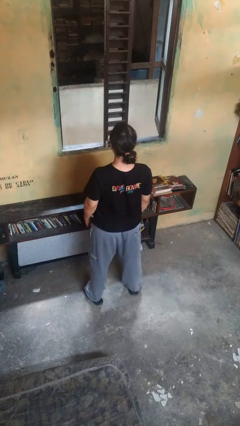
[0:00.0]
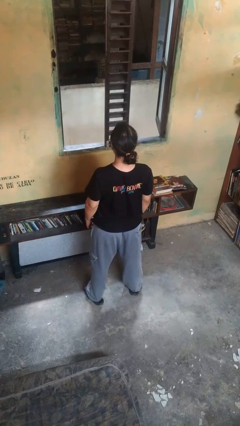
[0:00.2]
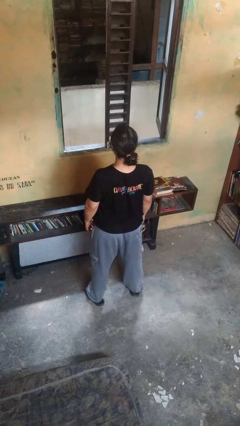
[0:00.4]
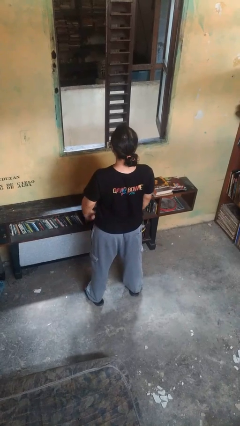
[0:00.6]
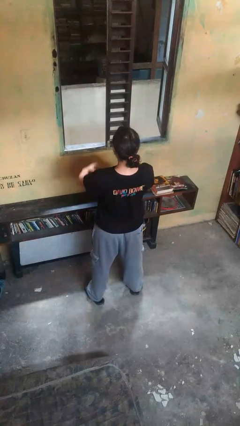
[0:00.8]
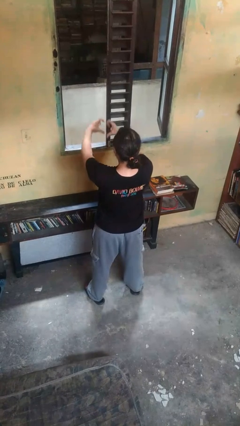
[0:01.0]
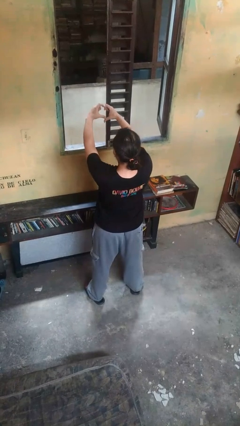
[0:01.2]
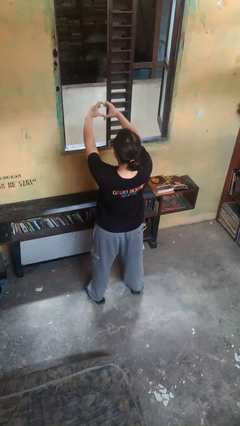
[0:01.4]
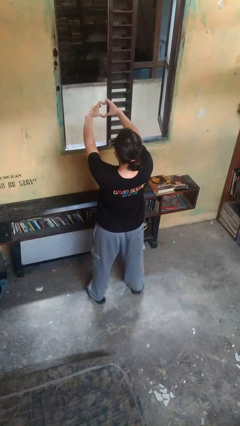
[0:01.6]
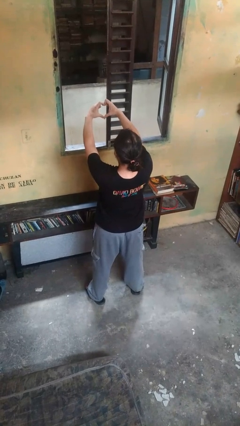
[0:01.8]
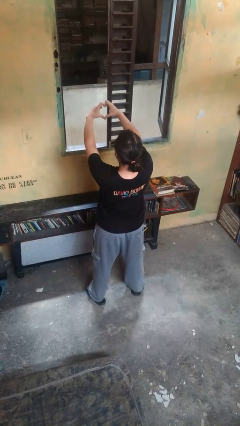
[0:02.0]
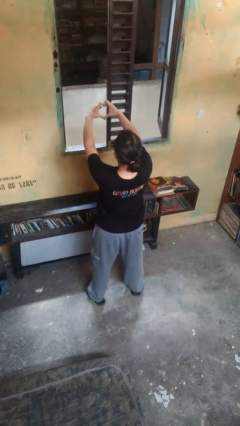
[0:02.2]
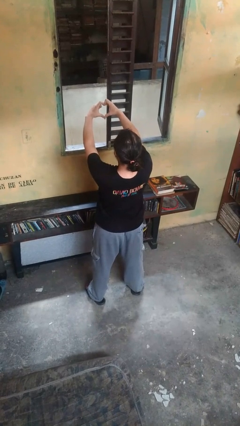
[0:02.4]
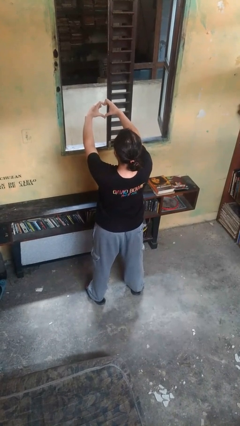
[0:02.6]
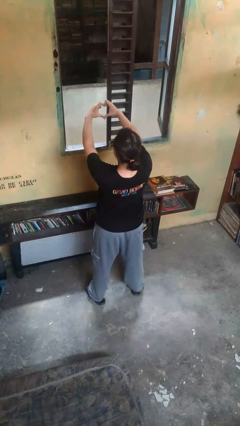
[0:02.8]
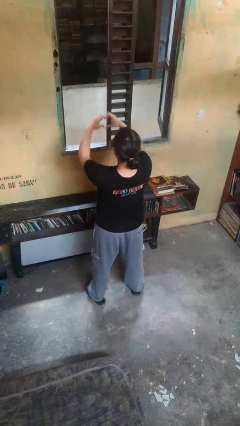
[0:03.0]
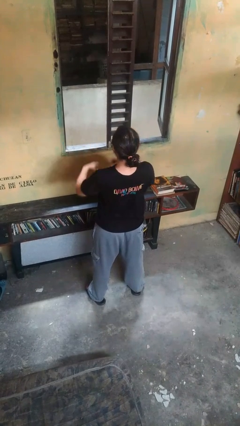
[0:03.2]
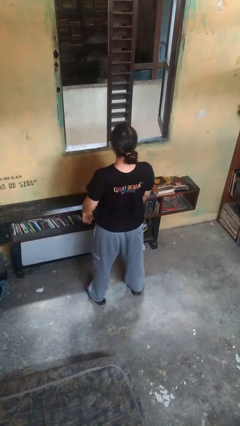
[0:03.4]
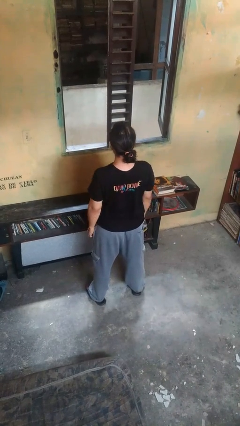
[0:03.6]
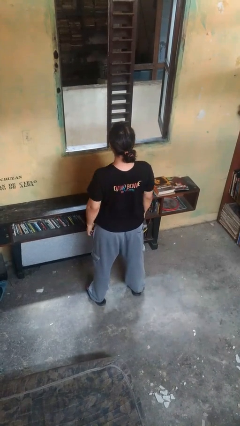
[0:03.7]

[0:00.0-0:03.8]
person gestures heart

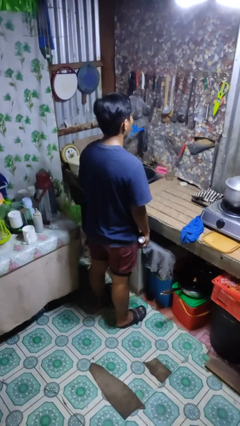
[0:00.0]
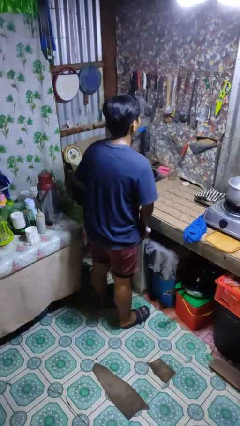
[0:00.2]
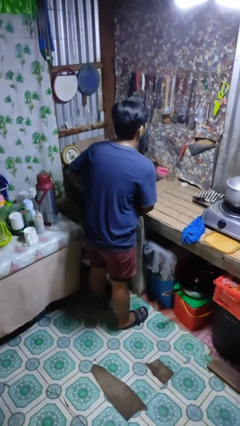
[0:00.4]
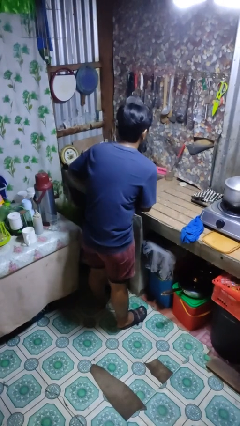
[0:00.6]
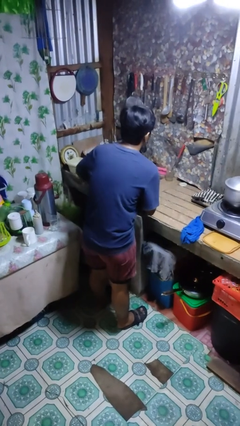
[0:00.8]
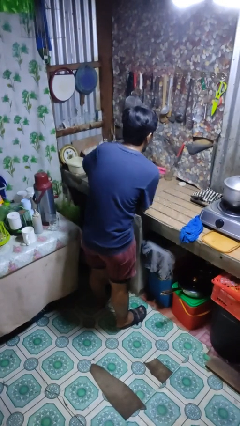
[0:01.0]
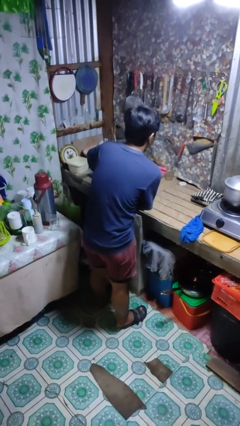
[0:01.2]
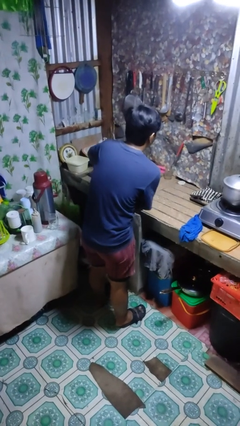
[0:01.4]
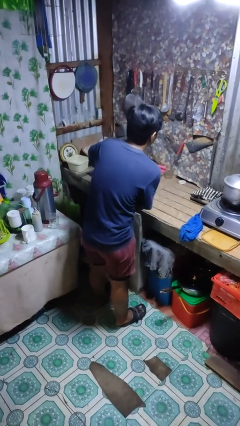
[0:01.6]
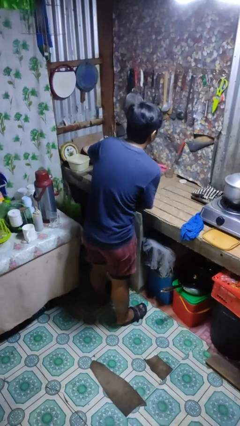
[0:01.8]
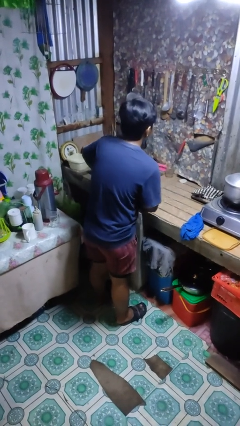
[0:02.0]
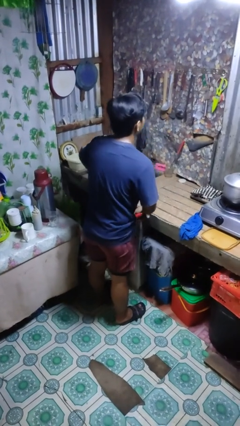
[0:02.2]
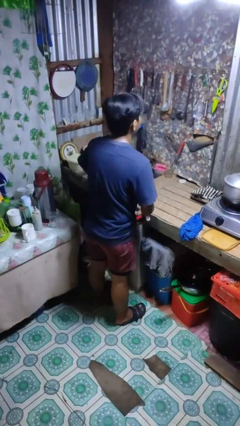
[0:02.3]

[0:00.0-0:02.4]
person applies deodorant

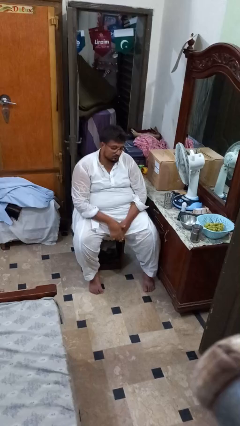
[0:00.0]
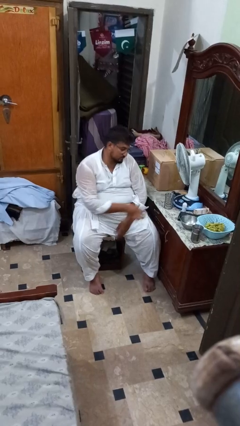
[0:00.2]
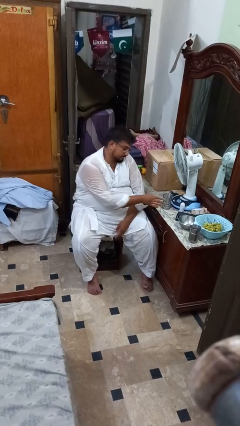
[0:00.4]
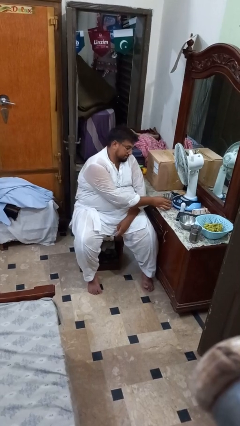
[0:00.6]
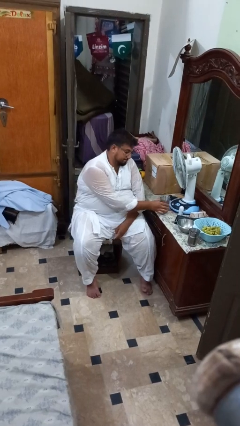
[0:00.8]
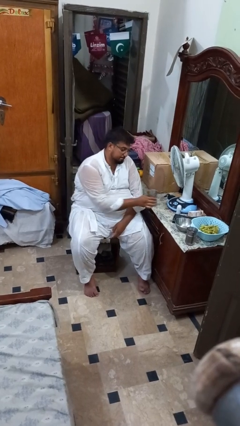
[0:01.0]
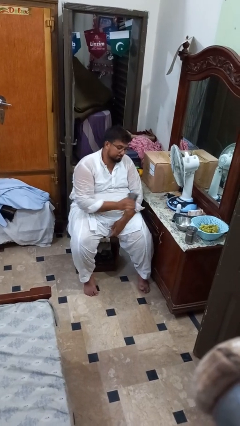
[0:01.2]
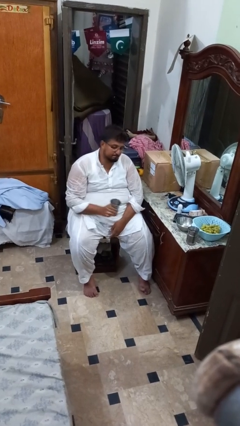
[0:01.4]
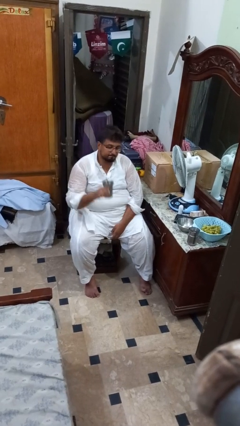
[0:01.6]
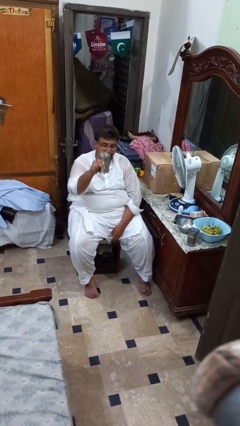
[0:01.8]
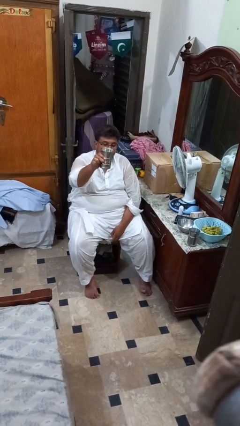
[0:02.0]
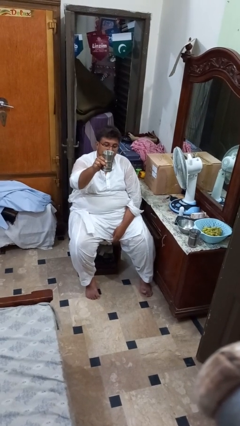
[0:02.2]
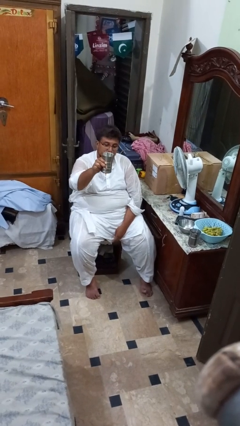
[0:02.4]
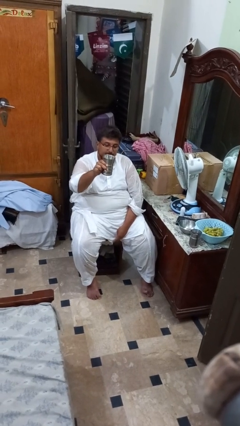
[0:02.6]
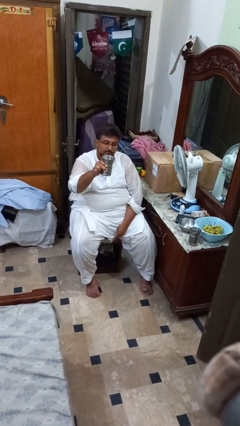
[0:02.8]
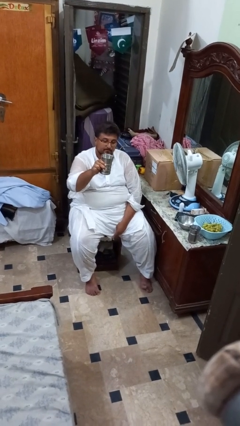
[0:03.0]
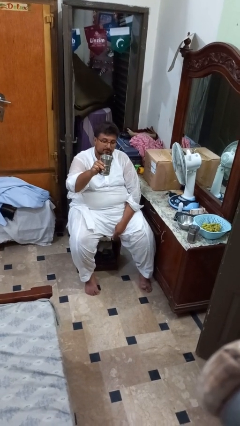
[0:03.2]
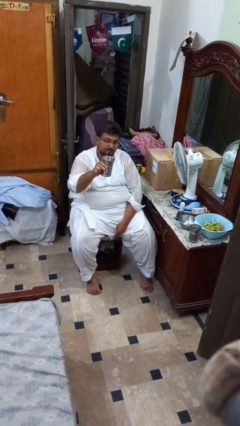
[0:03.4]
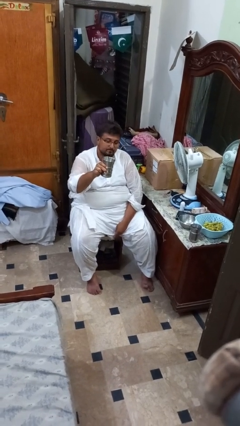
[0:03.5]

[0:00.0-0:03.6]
person picks up object from table

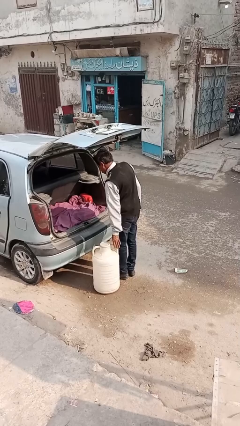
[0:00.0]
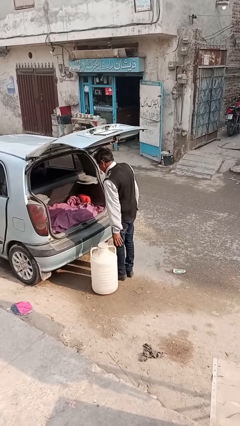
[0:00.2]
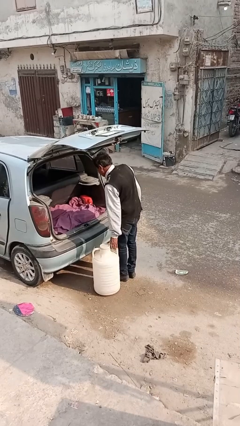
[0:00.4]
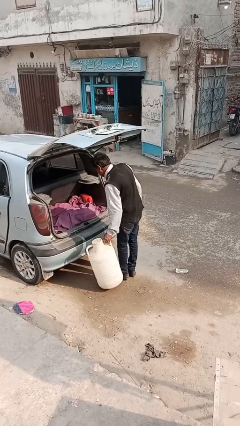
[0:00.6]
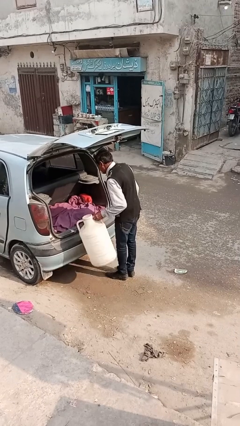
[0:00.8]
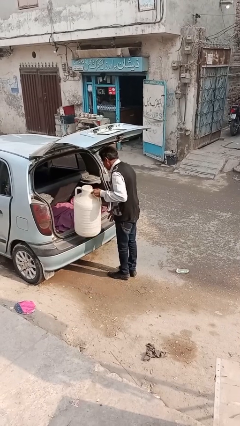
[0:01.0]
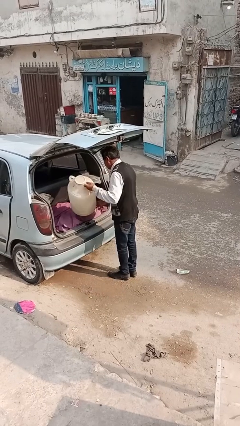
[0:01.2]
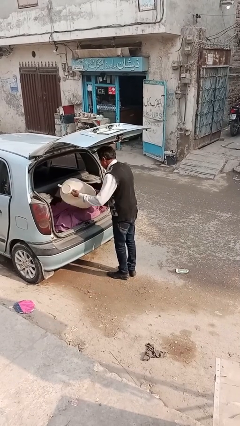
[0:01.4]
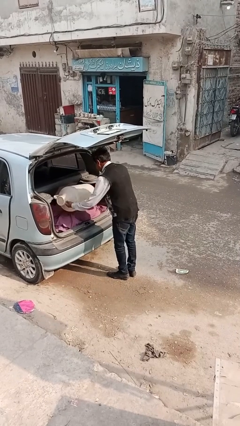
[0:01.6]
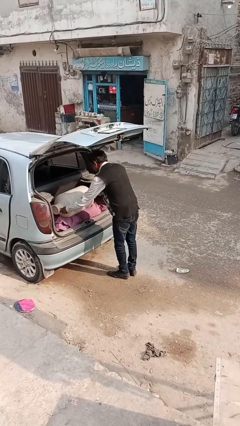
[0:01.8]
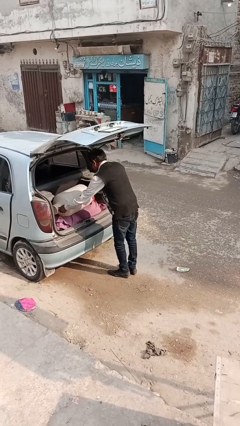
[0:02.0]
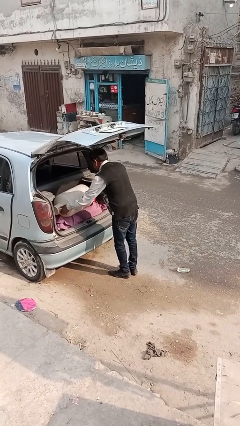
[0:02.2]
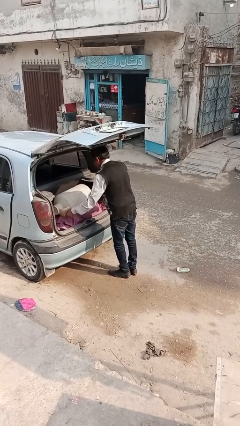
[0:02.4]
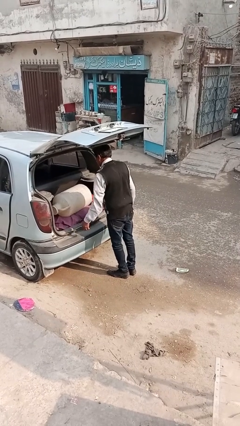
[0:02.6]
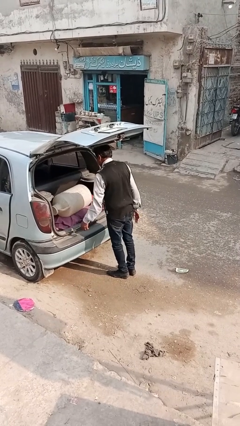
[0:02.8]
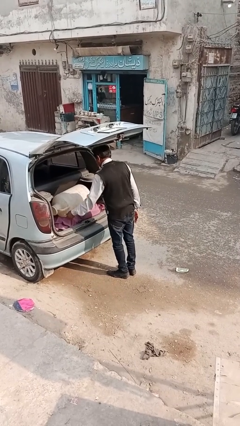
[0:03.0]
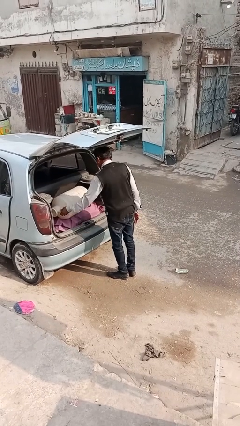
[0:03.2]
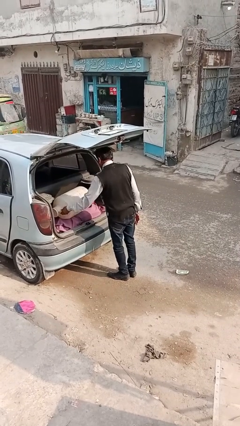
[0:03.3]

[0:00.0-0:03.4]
person loads car

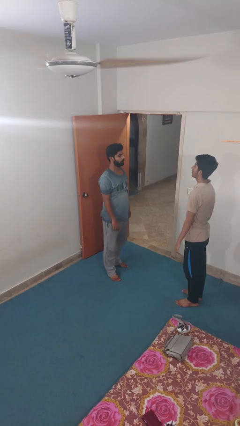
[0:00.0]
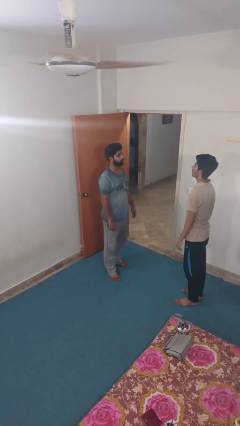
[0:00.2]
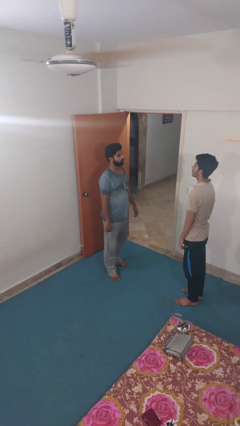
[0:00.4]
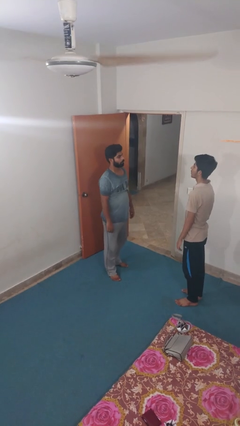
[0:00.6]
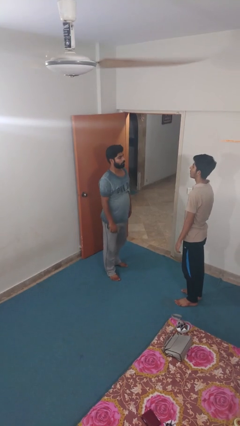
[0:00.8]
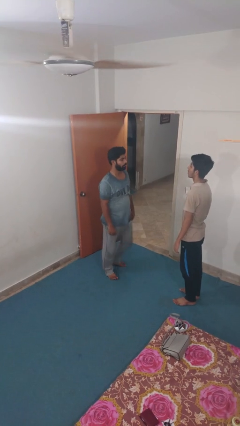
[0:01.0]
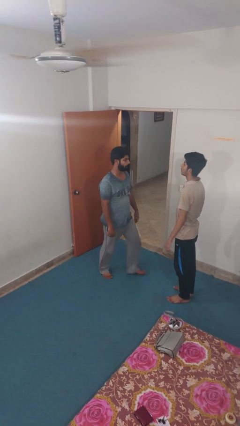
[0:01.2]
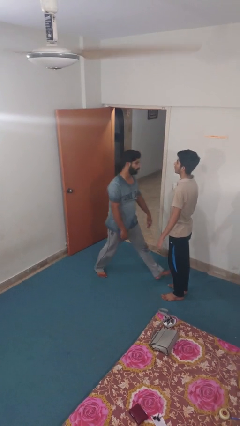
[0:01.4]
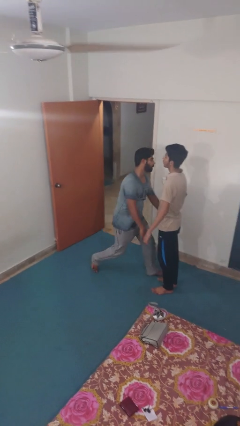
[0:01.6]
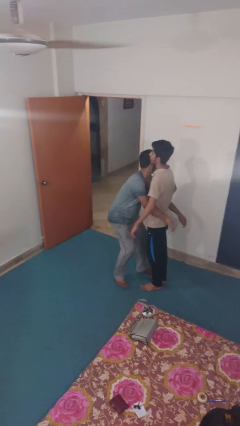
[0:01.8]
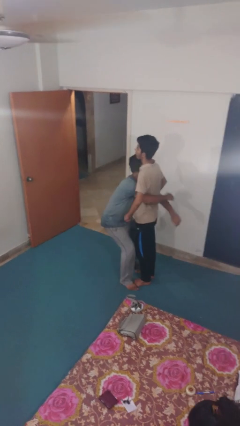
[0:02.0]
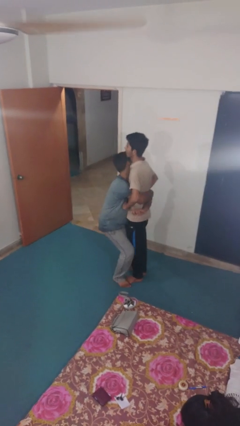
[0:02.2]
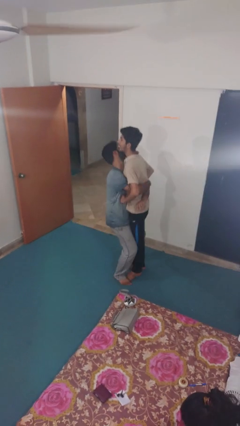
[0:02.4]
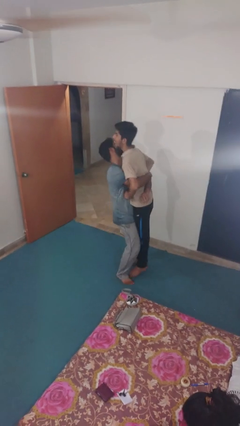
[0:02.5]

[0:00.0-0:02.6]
person picks up person

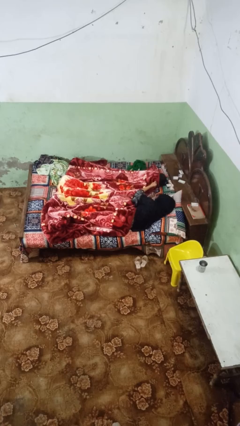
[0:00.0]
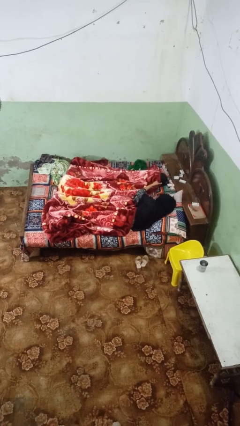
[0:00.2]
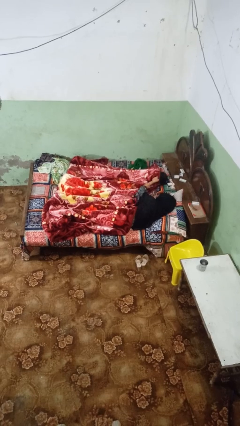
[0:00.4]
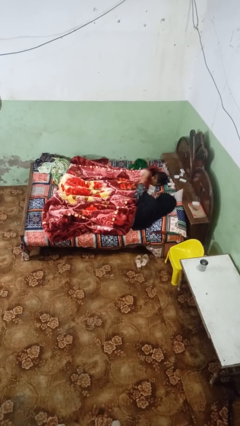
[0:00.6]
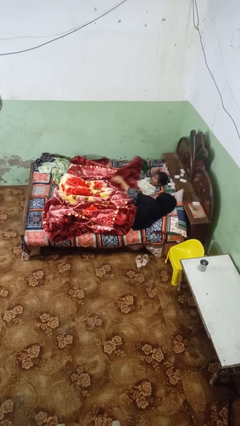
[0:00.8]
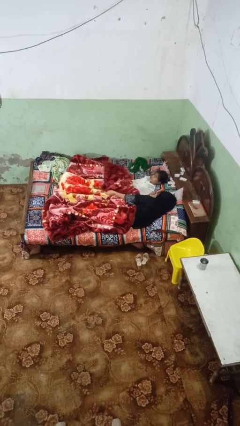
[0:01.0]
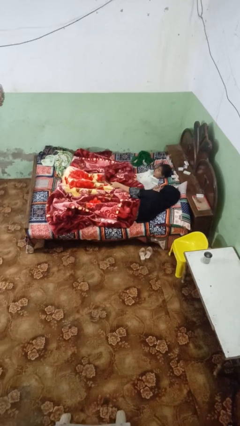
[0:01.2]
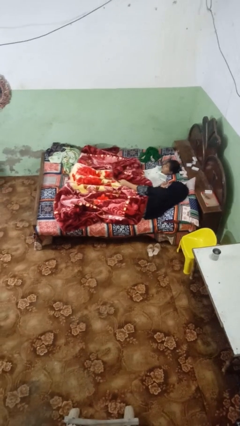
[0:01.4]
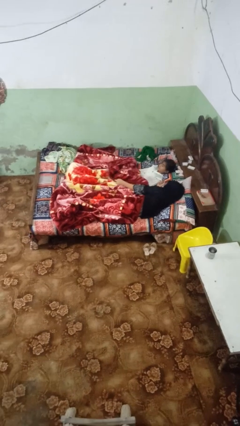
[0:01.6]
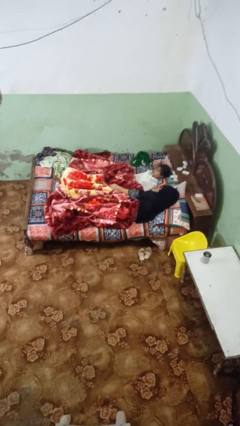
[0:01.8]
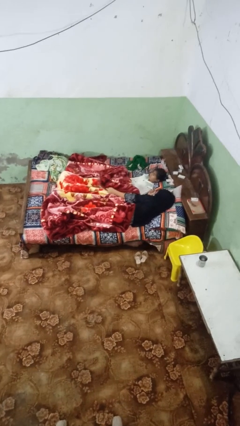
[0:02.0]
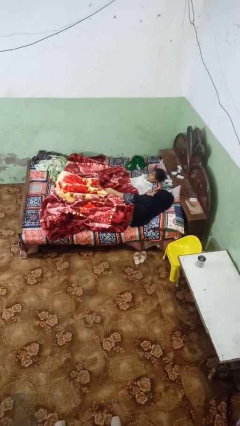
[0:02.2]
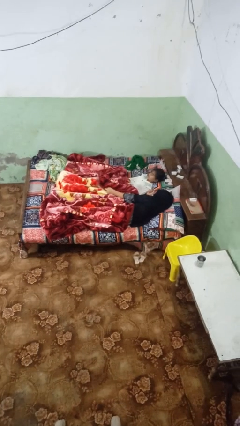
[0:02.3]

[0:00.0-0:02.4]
person uncovers friend with blanket
